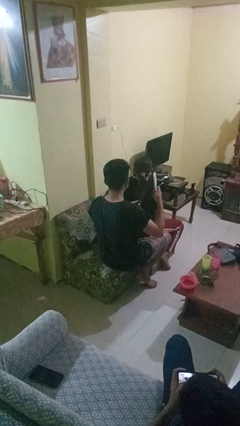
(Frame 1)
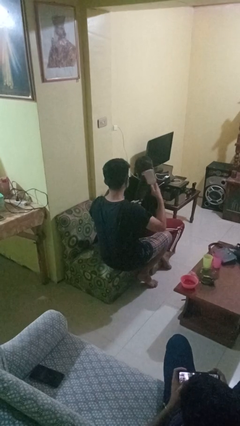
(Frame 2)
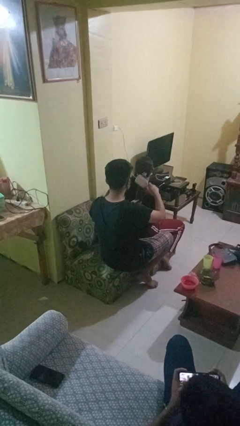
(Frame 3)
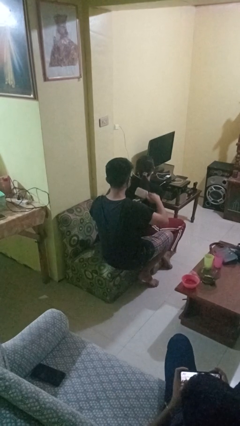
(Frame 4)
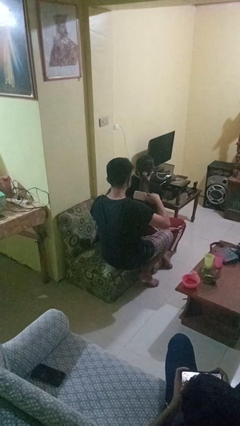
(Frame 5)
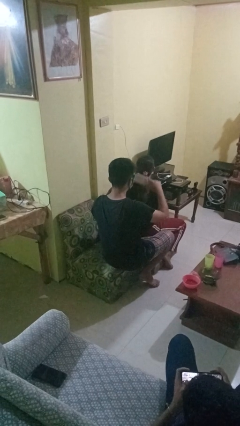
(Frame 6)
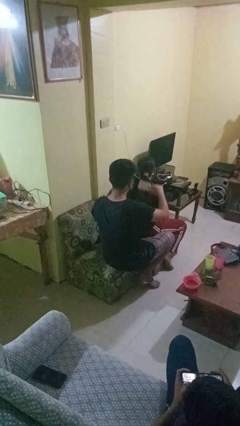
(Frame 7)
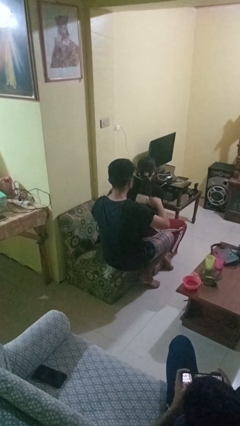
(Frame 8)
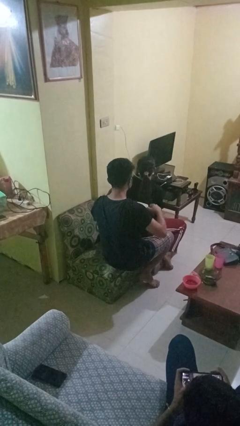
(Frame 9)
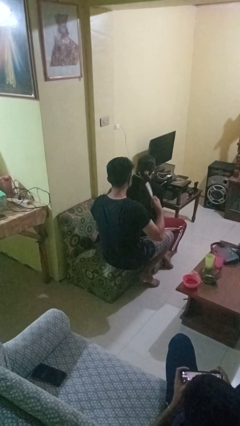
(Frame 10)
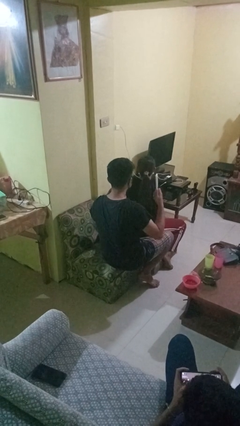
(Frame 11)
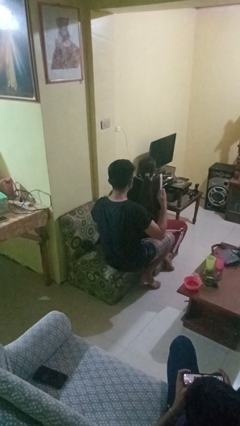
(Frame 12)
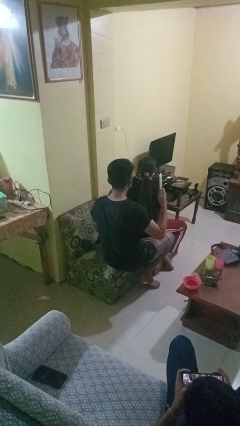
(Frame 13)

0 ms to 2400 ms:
person brushes hair of person

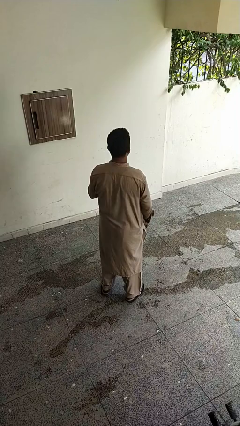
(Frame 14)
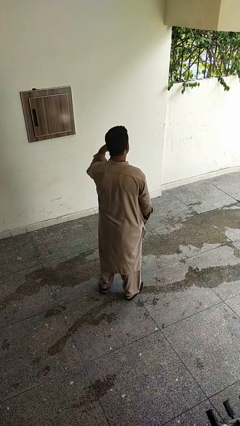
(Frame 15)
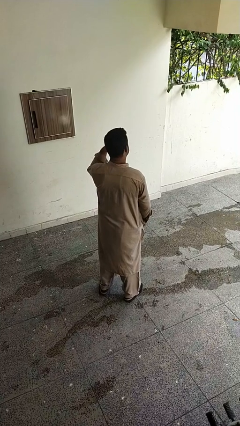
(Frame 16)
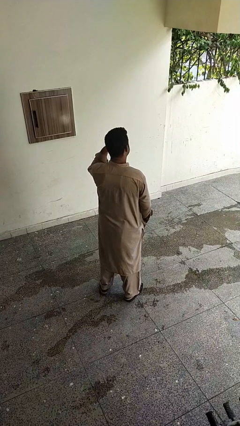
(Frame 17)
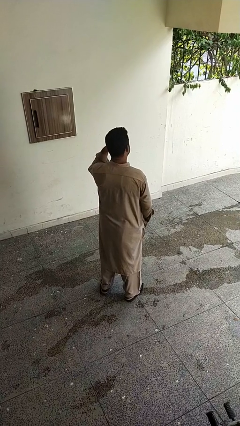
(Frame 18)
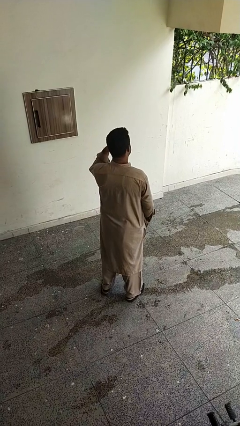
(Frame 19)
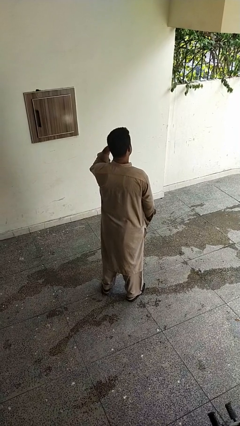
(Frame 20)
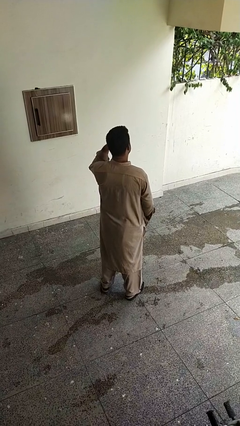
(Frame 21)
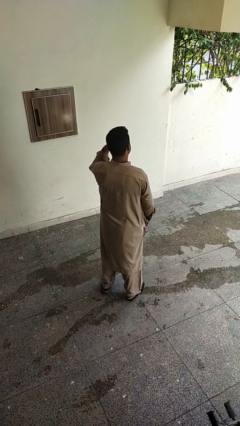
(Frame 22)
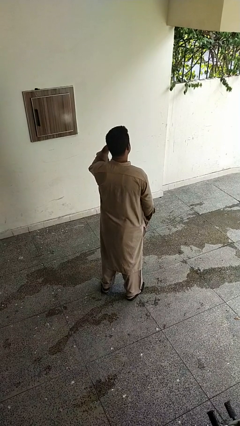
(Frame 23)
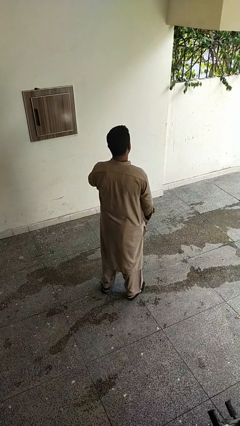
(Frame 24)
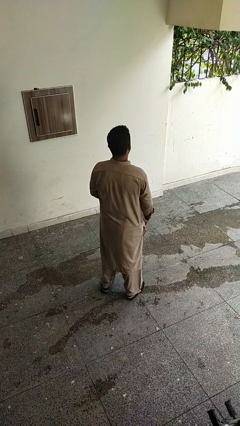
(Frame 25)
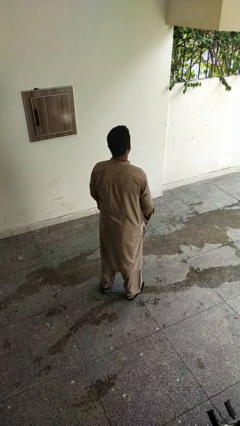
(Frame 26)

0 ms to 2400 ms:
person gestures call me

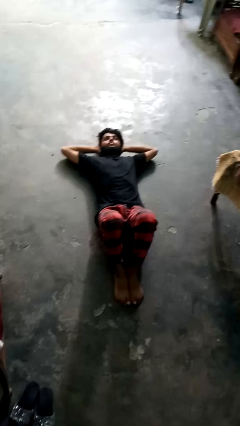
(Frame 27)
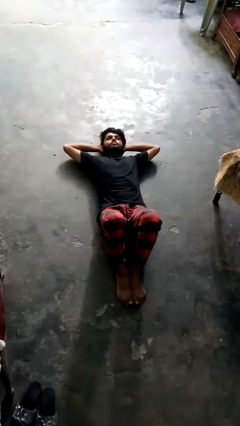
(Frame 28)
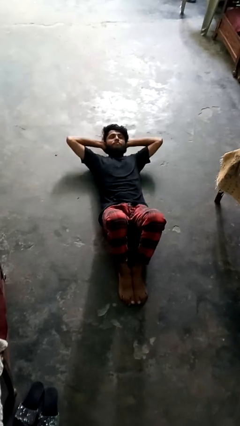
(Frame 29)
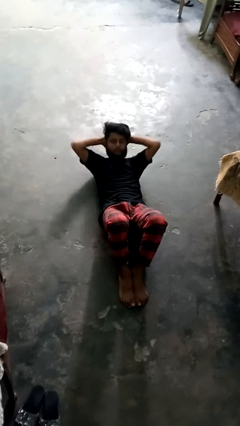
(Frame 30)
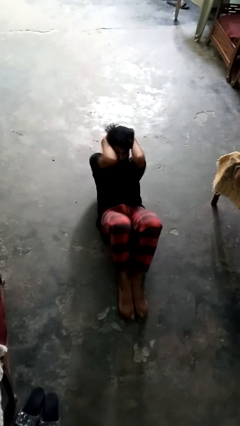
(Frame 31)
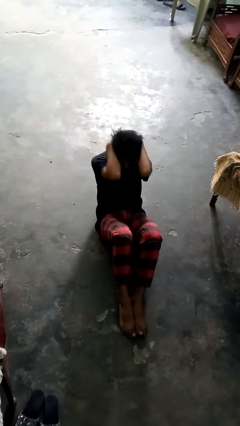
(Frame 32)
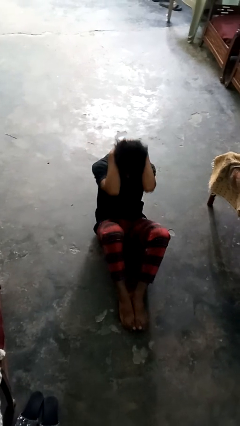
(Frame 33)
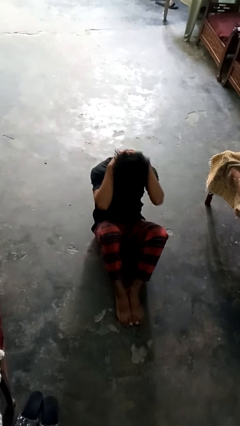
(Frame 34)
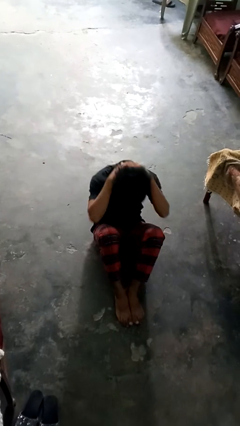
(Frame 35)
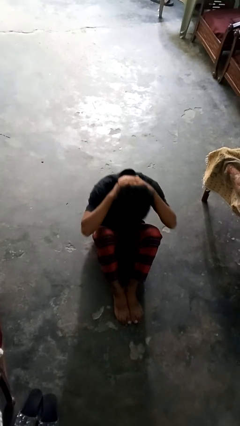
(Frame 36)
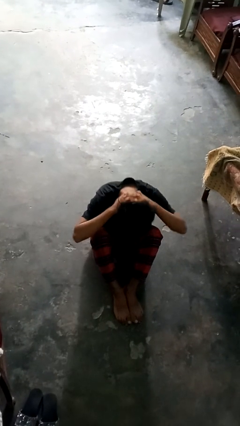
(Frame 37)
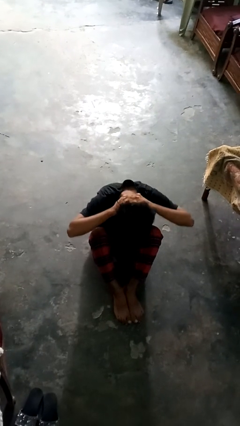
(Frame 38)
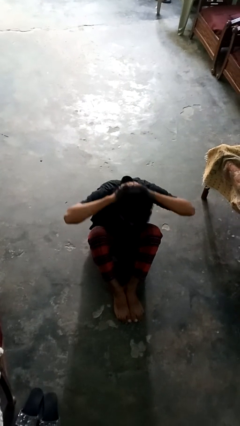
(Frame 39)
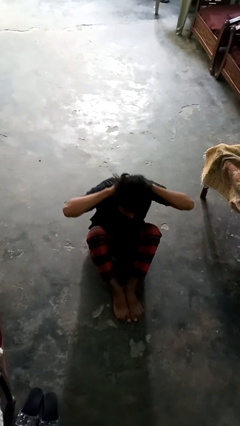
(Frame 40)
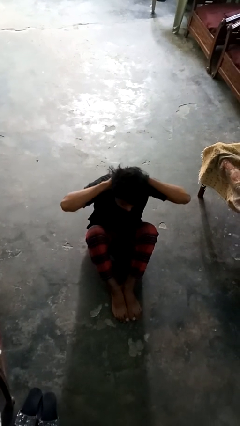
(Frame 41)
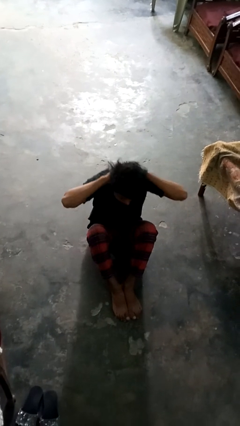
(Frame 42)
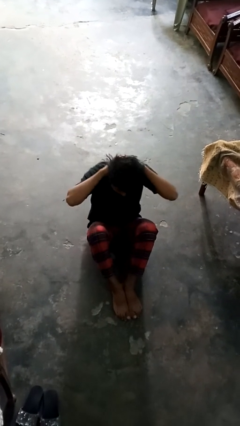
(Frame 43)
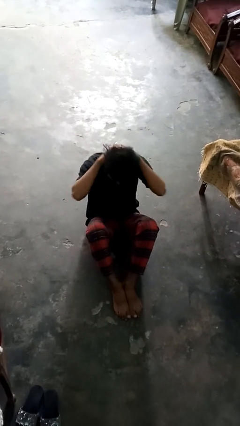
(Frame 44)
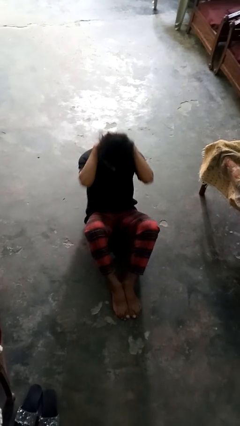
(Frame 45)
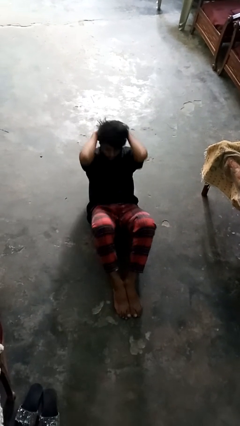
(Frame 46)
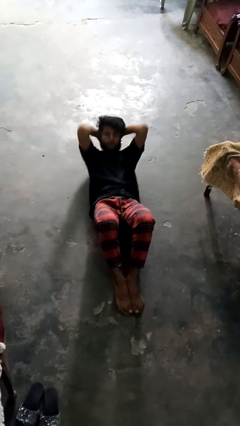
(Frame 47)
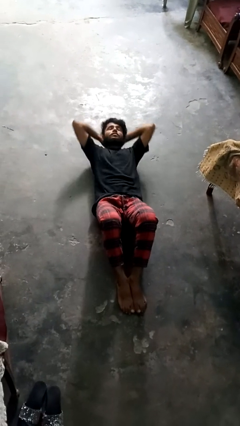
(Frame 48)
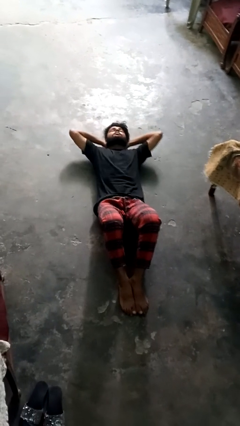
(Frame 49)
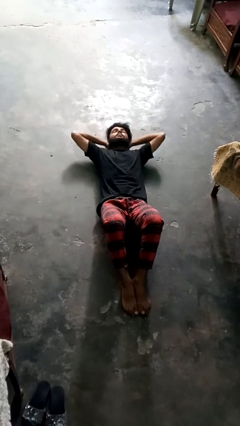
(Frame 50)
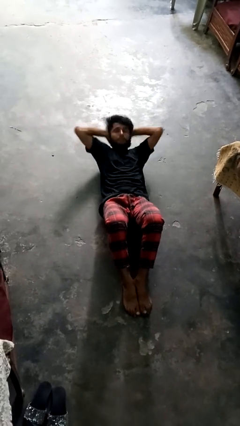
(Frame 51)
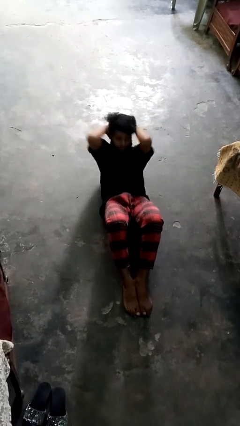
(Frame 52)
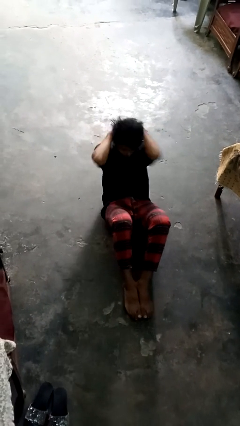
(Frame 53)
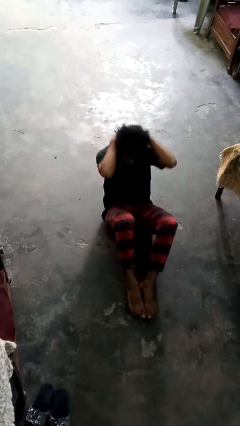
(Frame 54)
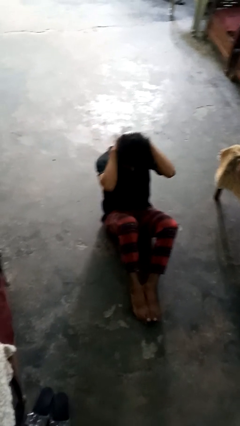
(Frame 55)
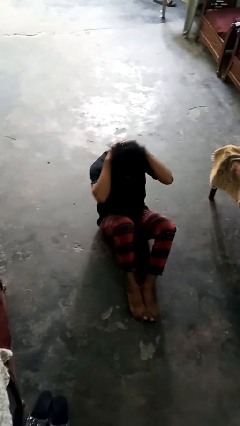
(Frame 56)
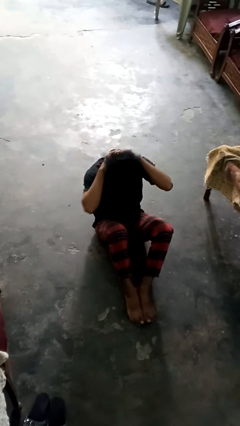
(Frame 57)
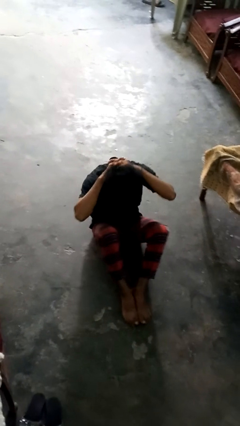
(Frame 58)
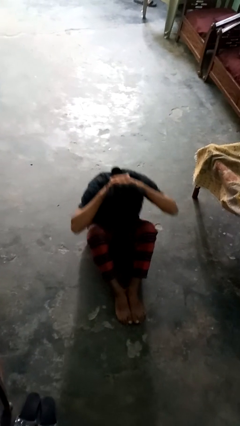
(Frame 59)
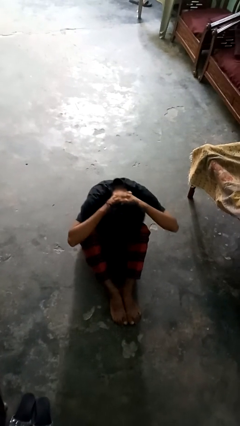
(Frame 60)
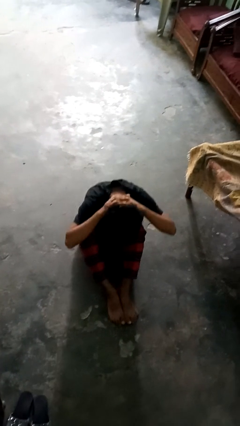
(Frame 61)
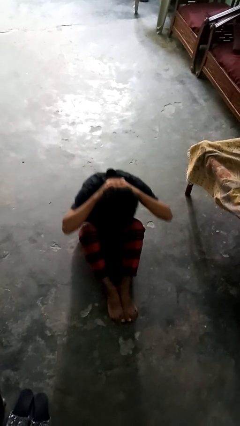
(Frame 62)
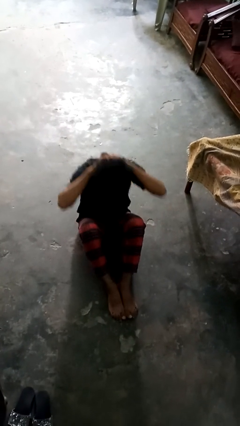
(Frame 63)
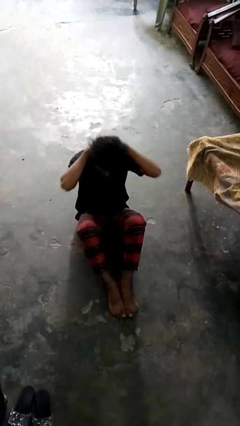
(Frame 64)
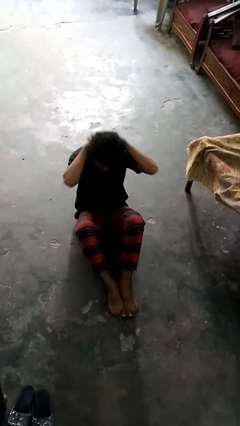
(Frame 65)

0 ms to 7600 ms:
person exercises with situp

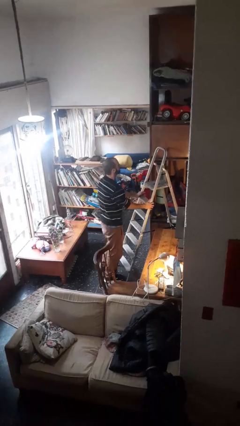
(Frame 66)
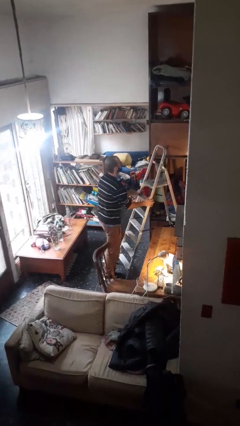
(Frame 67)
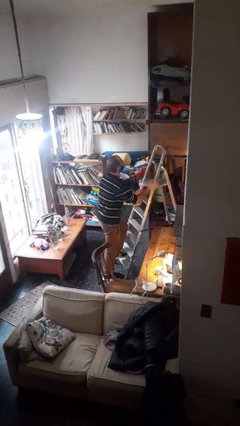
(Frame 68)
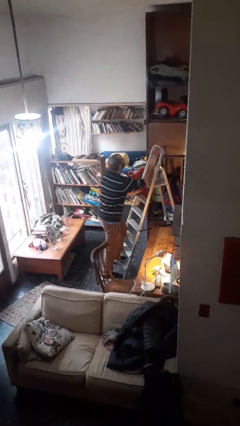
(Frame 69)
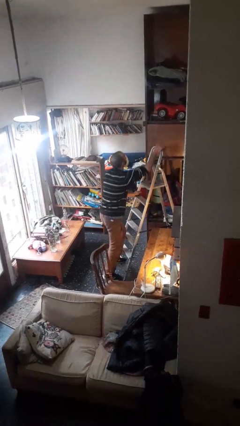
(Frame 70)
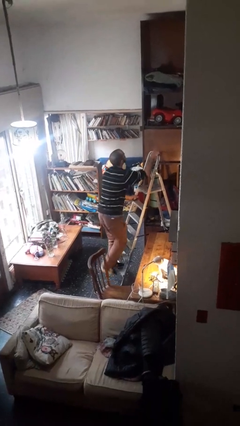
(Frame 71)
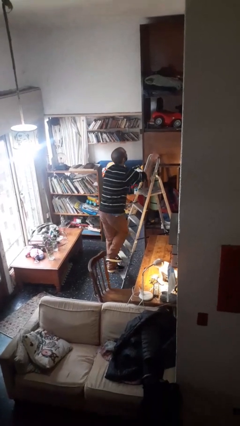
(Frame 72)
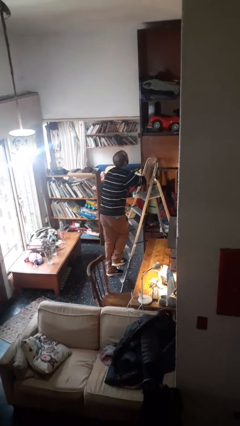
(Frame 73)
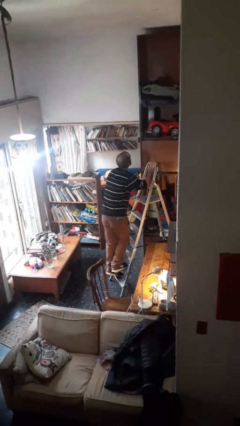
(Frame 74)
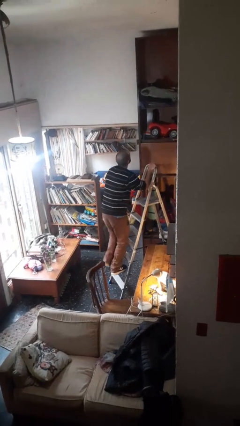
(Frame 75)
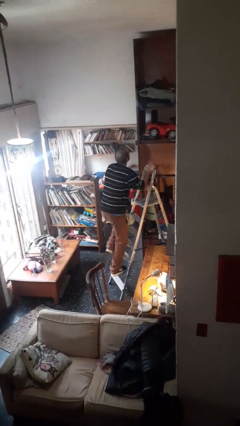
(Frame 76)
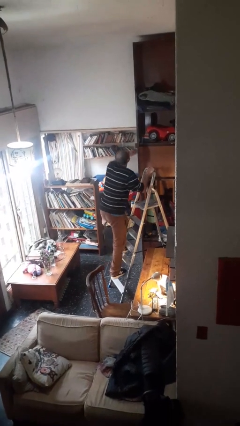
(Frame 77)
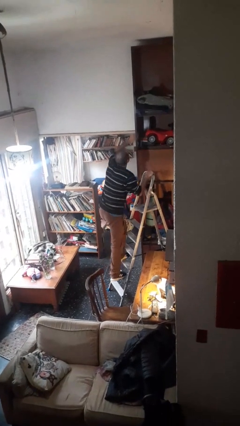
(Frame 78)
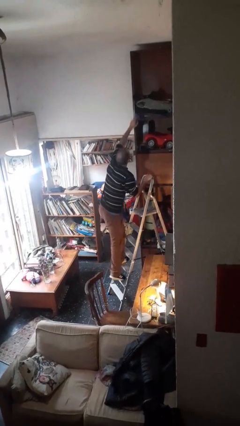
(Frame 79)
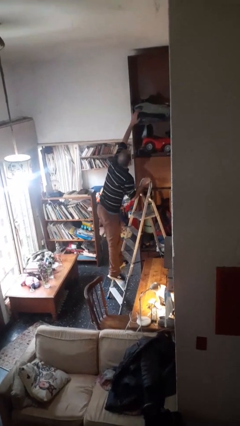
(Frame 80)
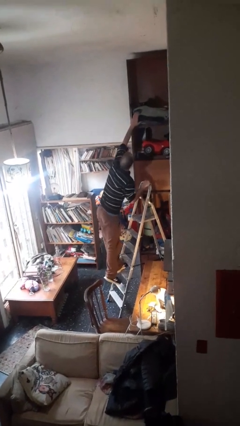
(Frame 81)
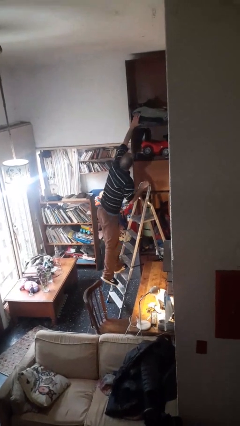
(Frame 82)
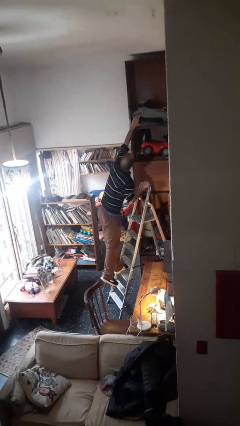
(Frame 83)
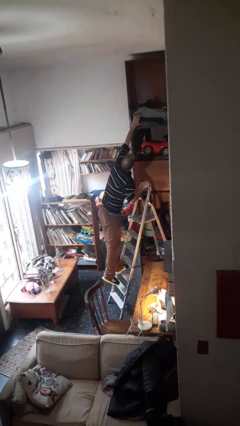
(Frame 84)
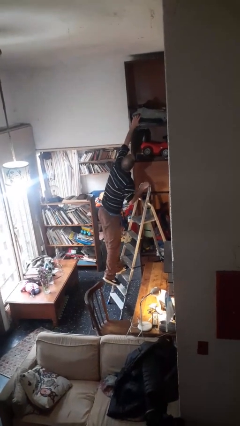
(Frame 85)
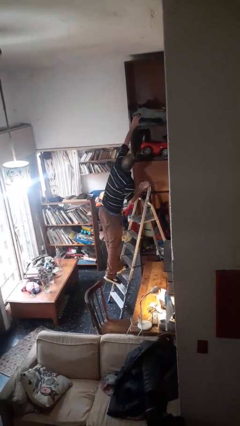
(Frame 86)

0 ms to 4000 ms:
person climbs up ladder

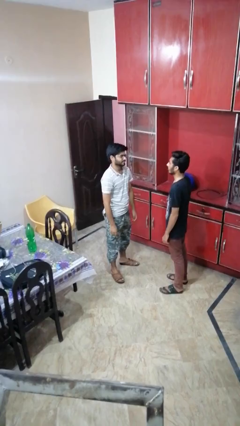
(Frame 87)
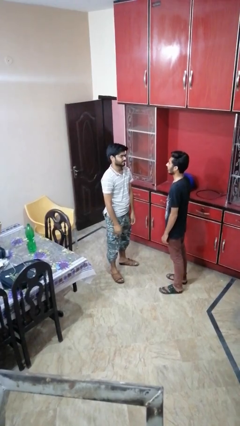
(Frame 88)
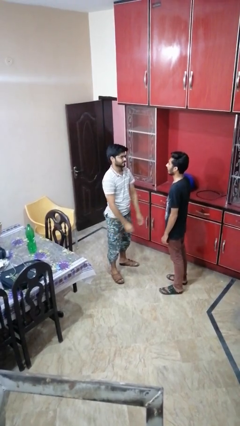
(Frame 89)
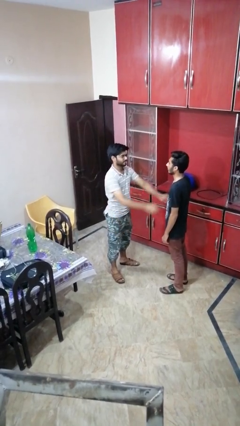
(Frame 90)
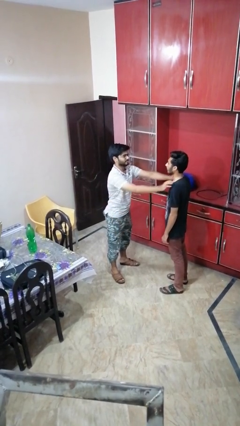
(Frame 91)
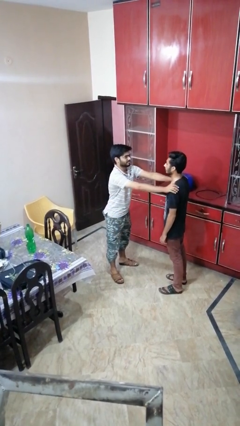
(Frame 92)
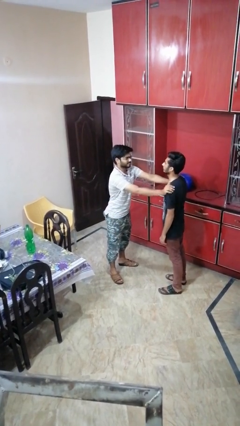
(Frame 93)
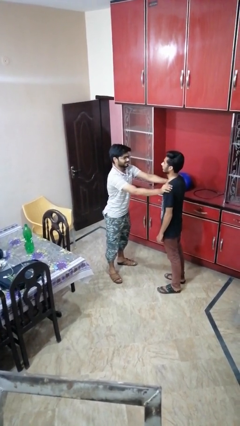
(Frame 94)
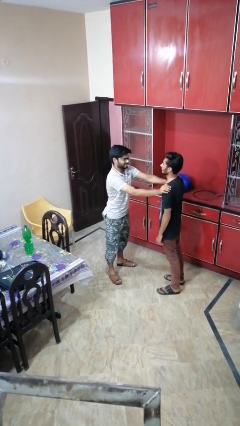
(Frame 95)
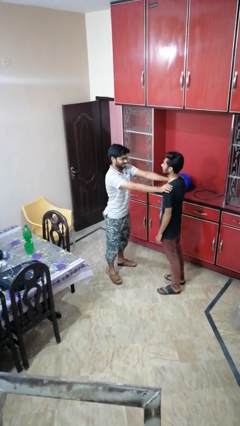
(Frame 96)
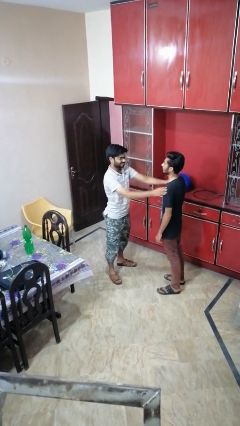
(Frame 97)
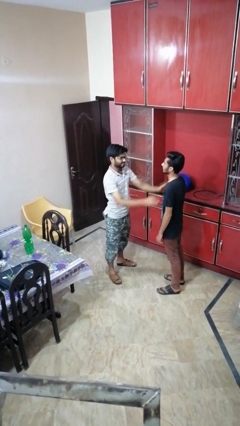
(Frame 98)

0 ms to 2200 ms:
person pounds shoulders of person
